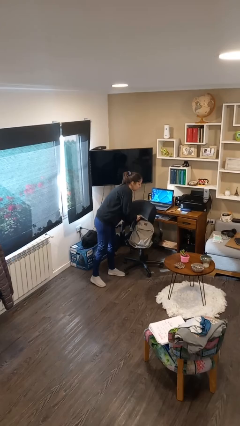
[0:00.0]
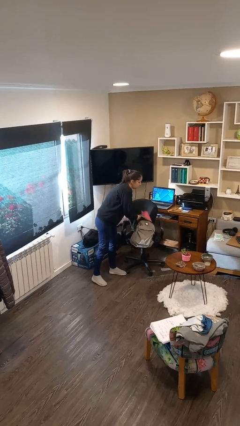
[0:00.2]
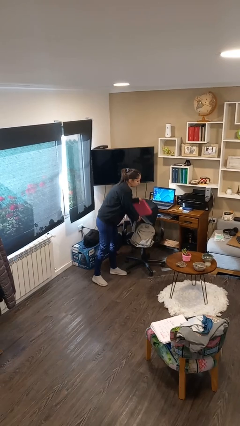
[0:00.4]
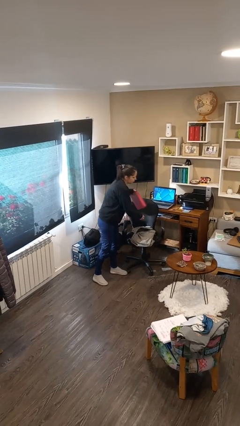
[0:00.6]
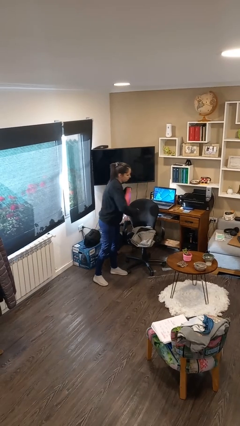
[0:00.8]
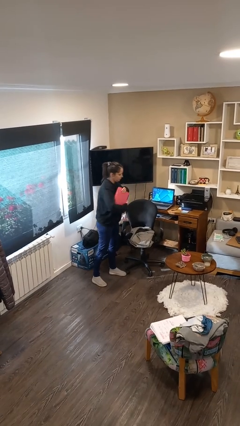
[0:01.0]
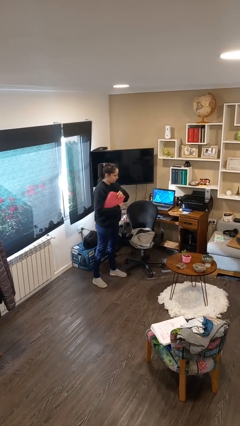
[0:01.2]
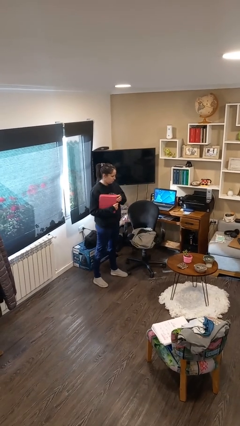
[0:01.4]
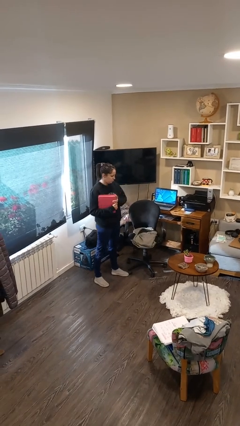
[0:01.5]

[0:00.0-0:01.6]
person takes object from backpack

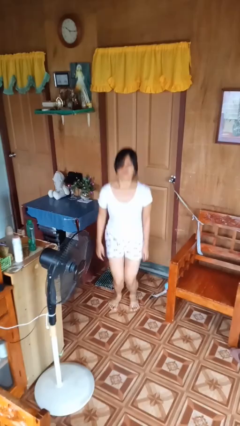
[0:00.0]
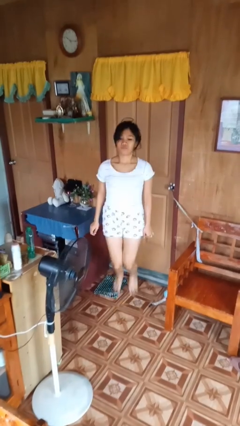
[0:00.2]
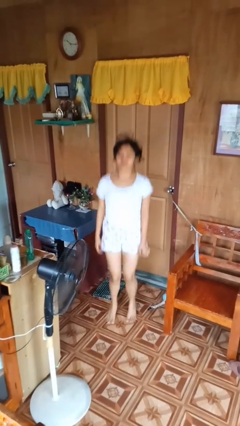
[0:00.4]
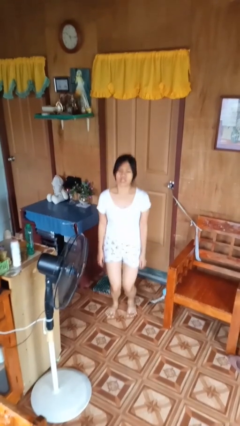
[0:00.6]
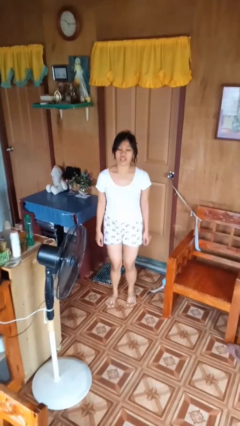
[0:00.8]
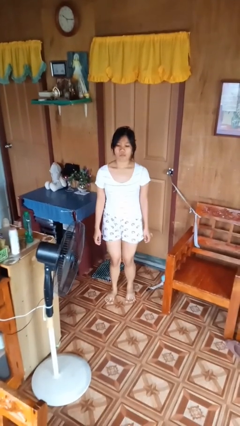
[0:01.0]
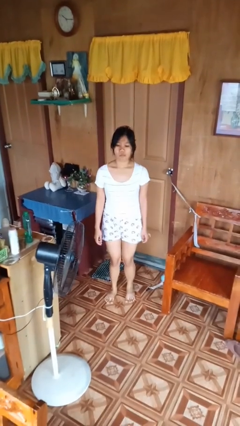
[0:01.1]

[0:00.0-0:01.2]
person jumps

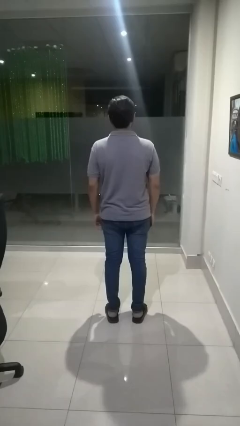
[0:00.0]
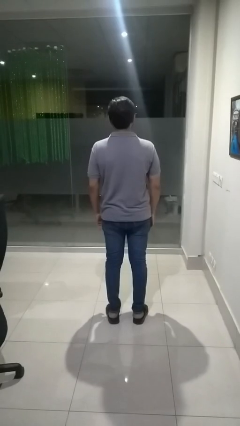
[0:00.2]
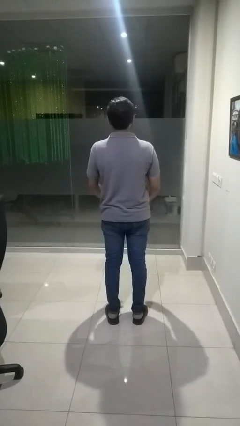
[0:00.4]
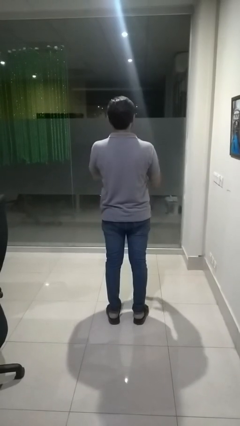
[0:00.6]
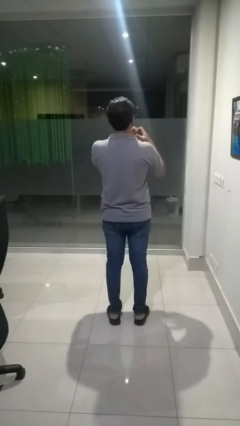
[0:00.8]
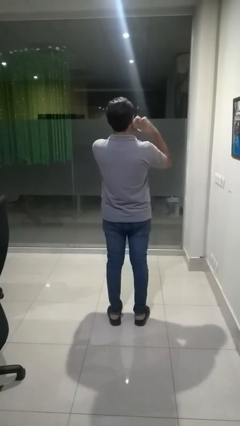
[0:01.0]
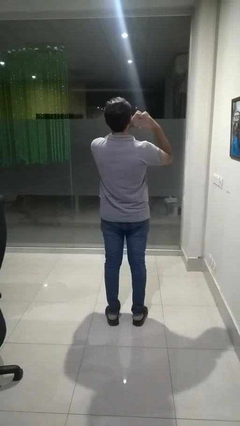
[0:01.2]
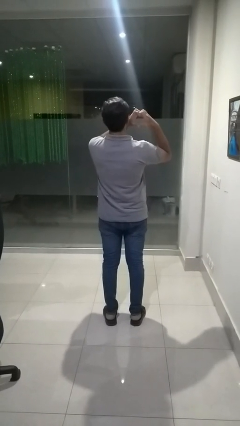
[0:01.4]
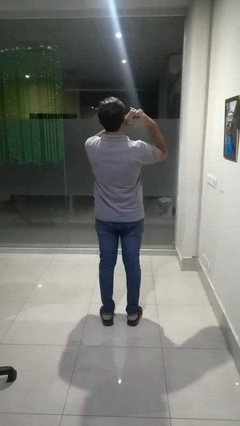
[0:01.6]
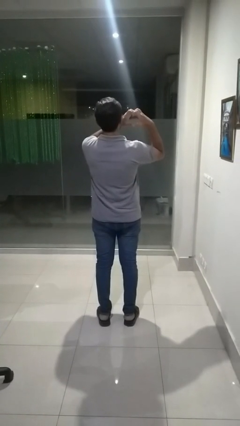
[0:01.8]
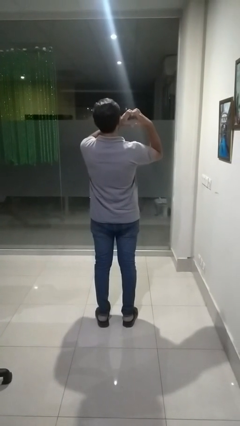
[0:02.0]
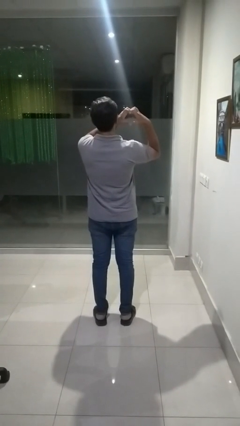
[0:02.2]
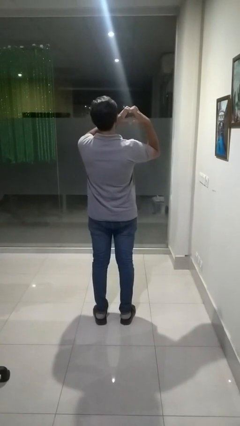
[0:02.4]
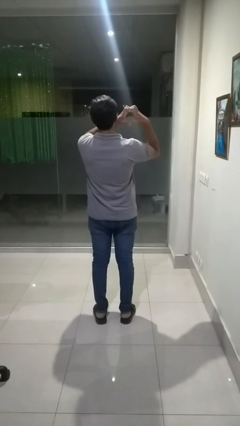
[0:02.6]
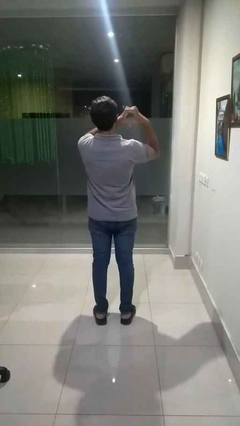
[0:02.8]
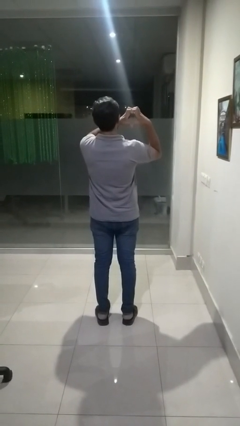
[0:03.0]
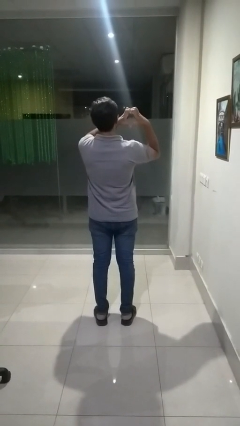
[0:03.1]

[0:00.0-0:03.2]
person gestures heart

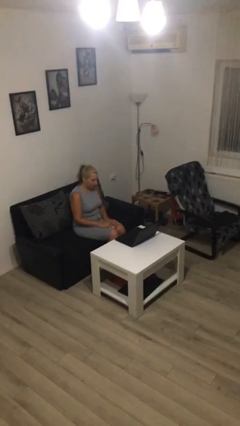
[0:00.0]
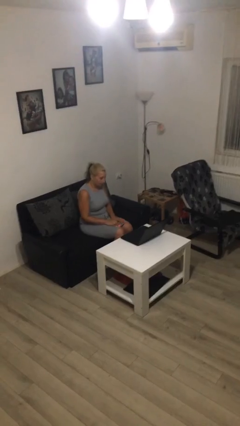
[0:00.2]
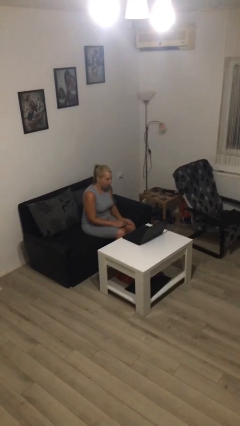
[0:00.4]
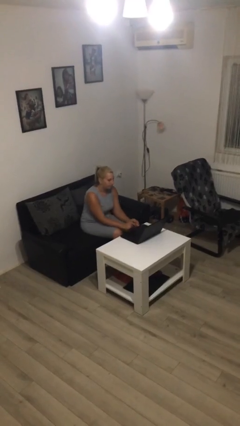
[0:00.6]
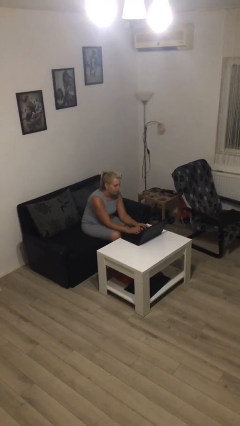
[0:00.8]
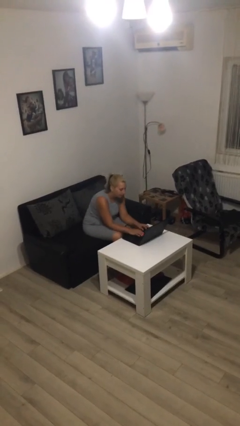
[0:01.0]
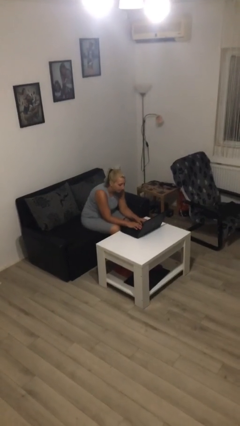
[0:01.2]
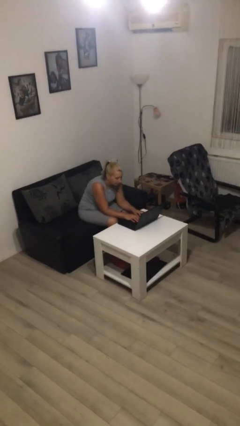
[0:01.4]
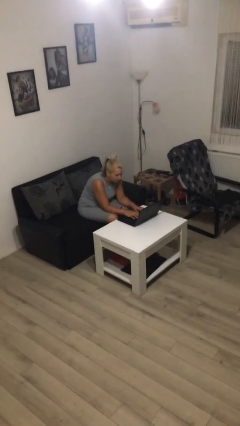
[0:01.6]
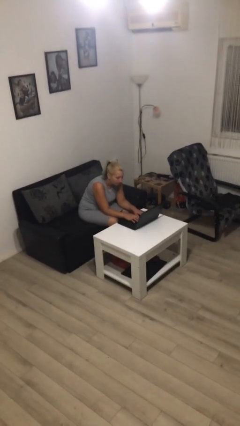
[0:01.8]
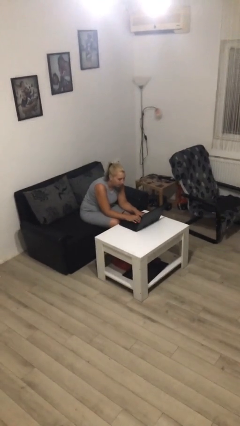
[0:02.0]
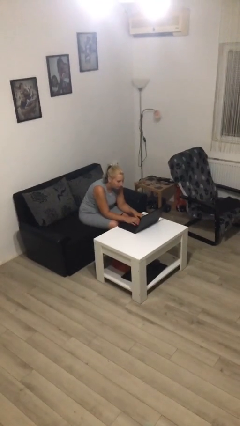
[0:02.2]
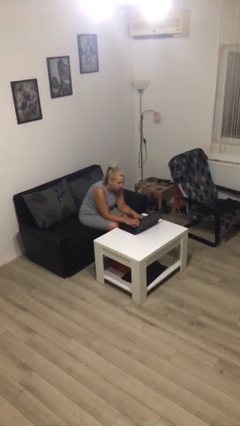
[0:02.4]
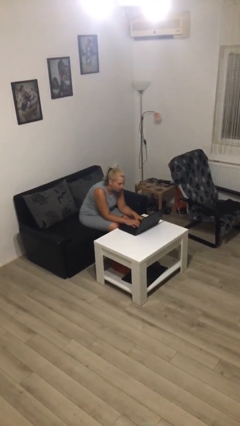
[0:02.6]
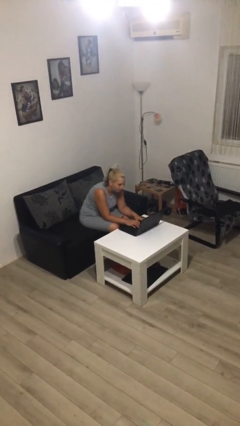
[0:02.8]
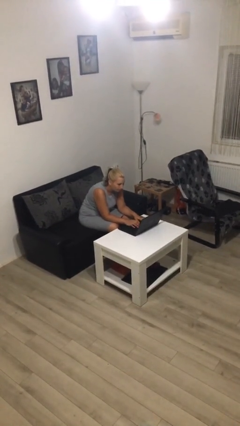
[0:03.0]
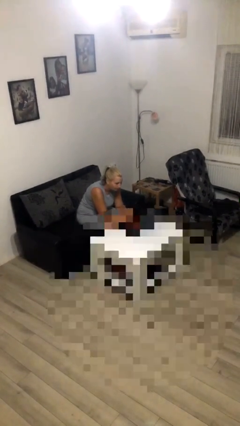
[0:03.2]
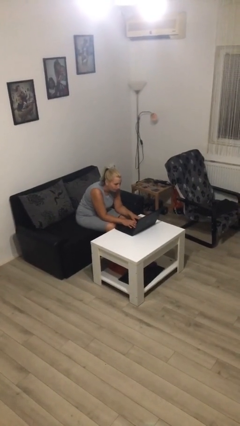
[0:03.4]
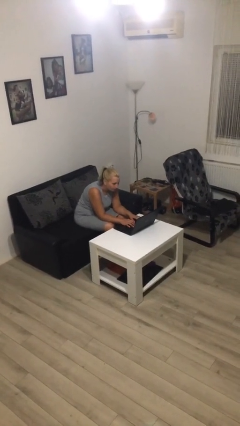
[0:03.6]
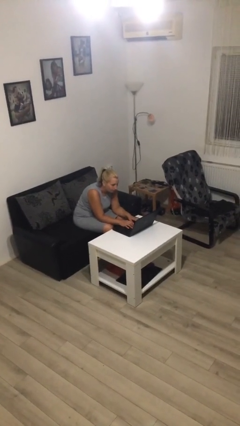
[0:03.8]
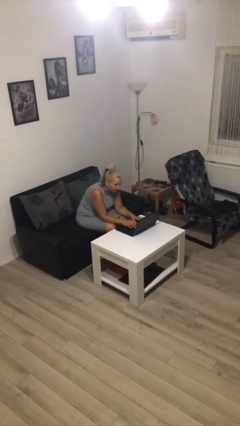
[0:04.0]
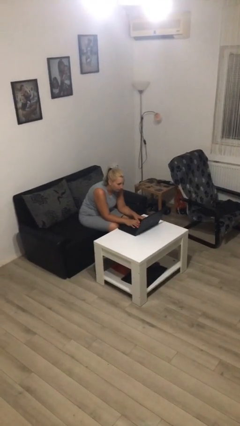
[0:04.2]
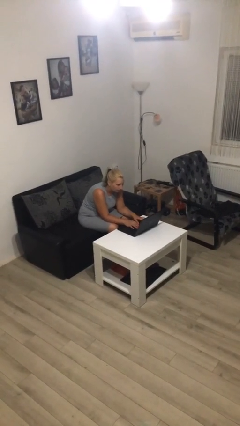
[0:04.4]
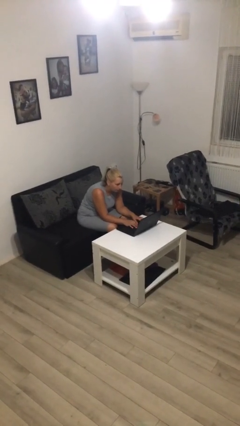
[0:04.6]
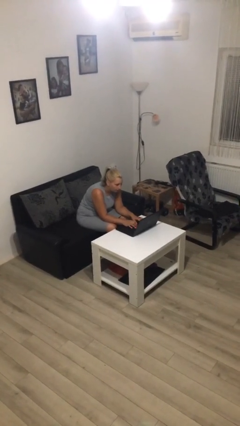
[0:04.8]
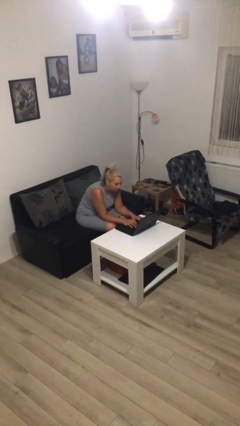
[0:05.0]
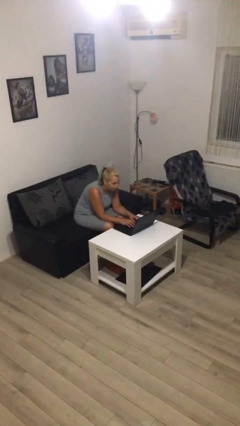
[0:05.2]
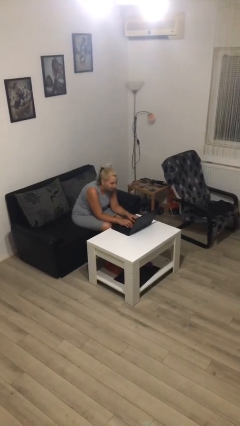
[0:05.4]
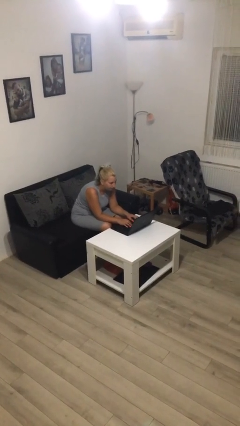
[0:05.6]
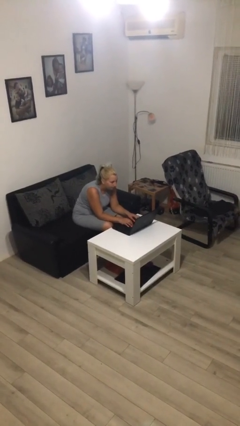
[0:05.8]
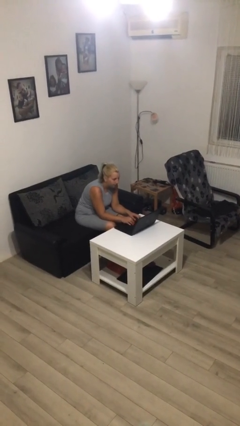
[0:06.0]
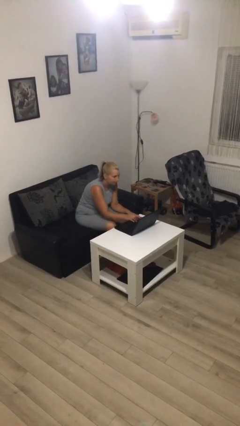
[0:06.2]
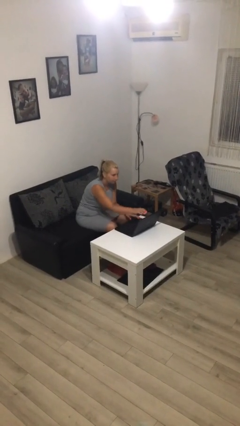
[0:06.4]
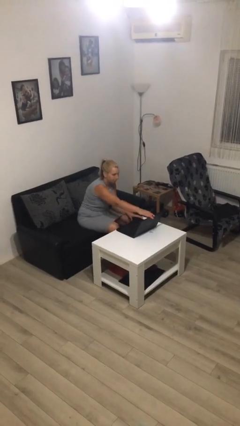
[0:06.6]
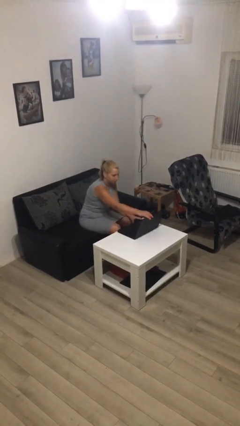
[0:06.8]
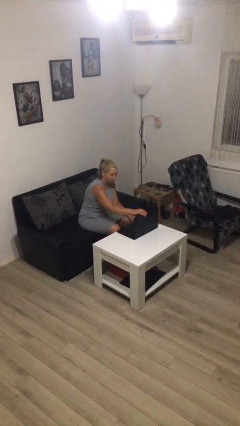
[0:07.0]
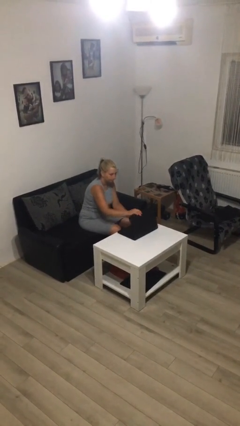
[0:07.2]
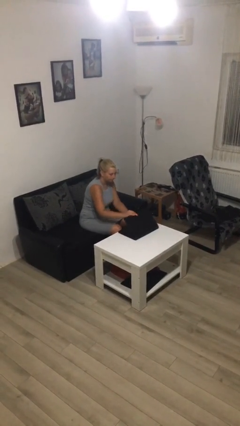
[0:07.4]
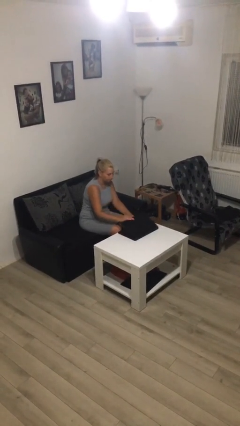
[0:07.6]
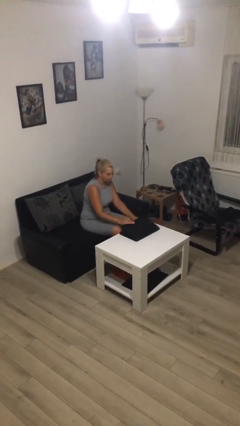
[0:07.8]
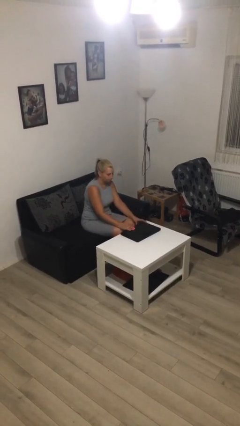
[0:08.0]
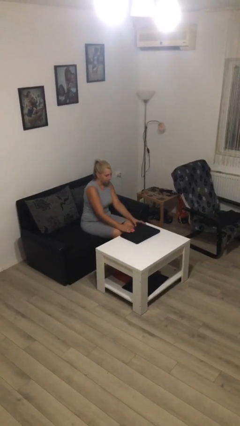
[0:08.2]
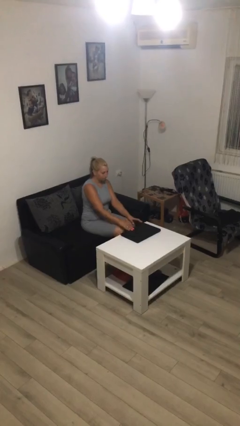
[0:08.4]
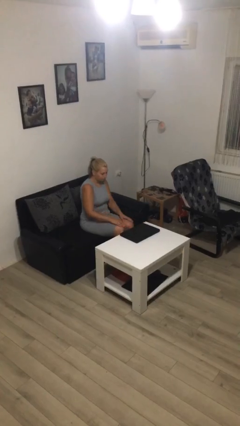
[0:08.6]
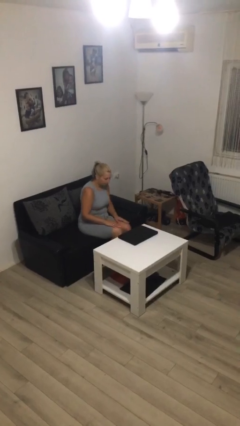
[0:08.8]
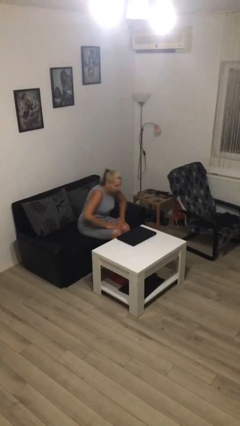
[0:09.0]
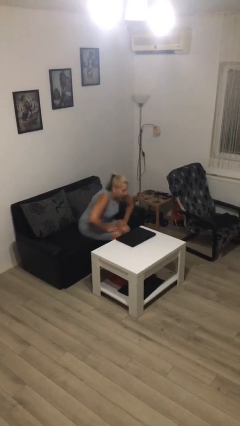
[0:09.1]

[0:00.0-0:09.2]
person interacts with laptop

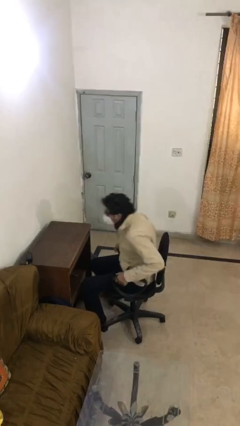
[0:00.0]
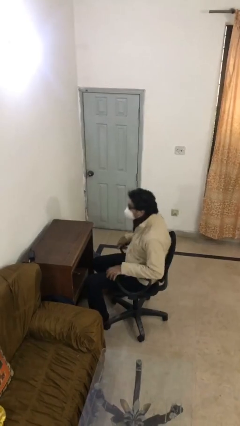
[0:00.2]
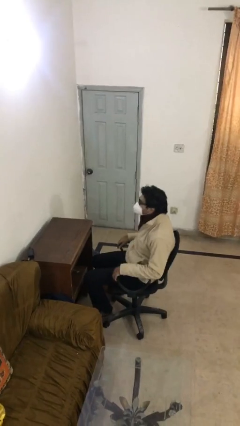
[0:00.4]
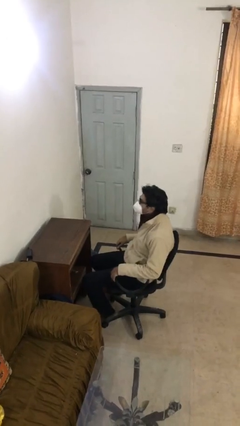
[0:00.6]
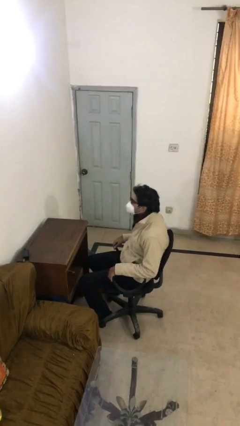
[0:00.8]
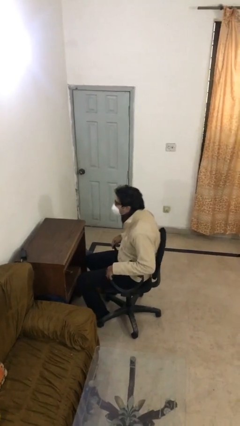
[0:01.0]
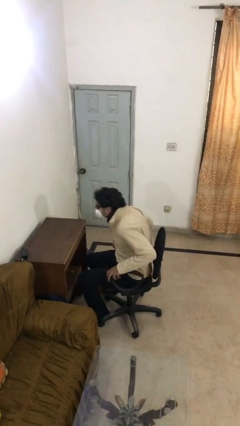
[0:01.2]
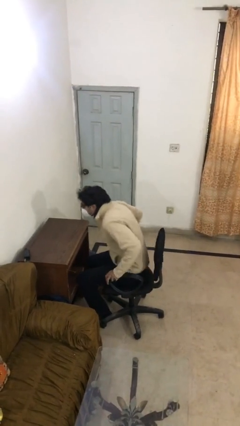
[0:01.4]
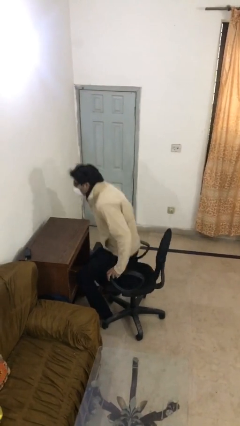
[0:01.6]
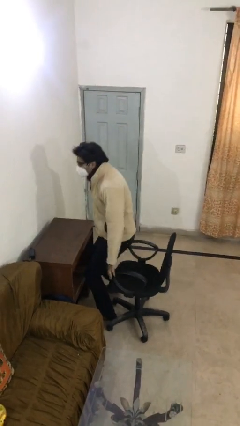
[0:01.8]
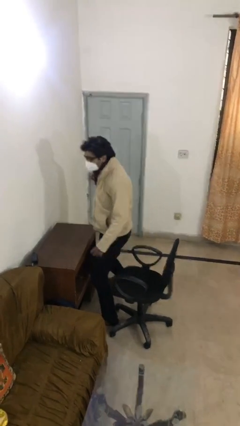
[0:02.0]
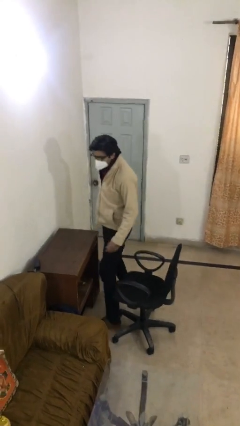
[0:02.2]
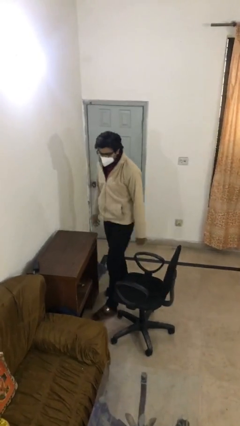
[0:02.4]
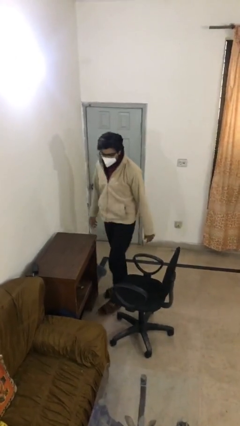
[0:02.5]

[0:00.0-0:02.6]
person stands up
